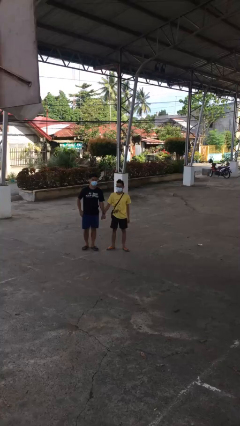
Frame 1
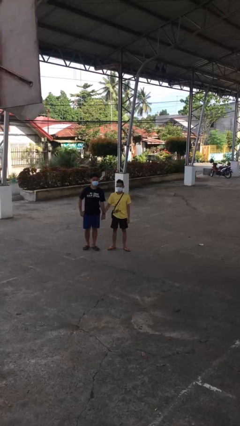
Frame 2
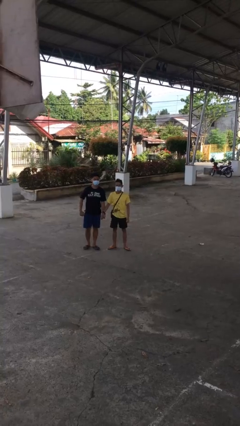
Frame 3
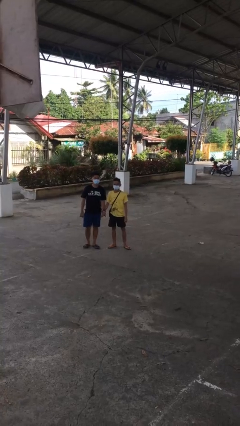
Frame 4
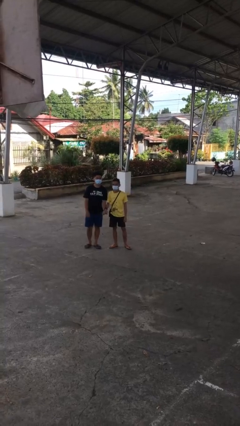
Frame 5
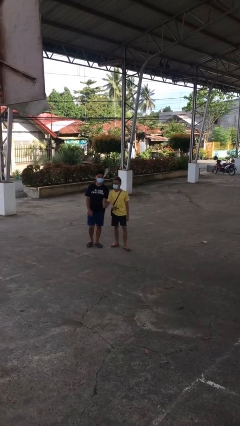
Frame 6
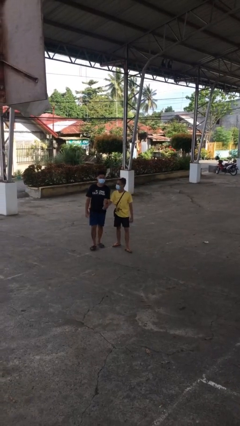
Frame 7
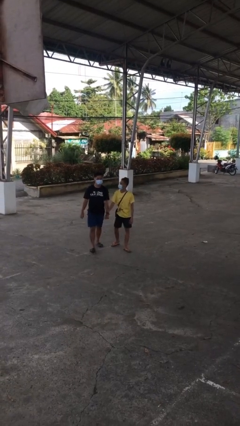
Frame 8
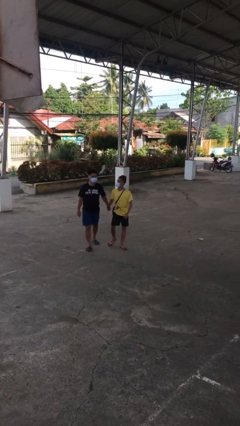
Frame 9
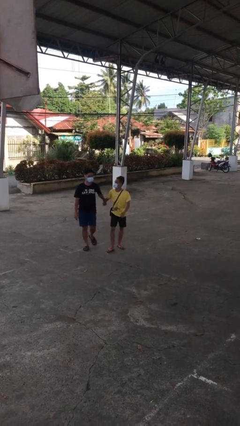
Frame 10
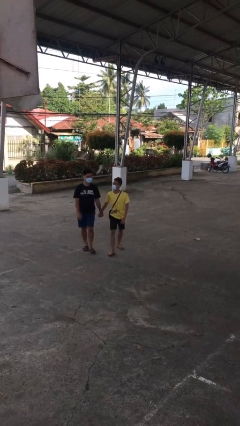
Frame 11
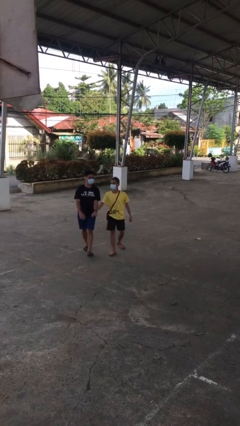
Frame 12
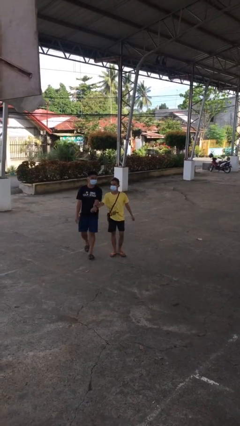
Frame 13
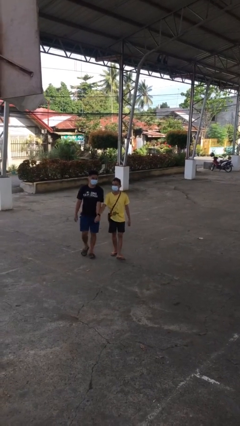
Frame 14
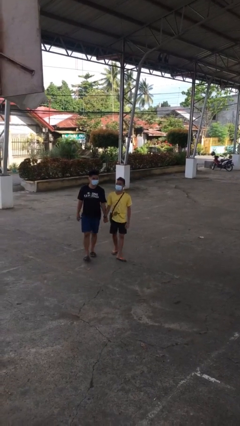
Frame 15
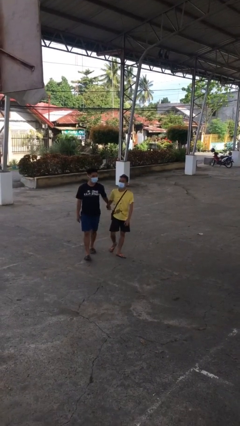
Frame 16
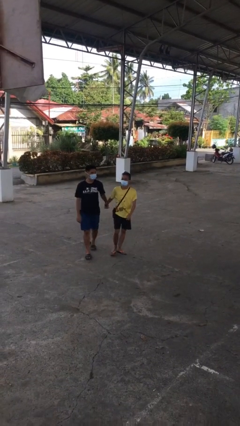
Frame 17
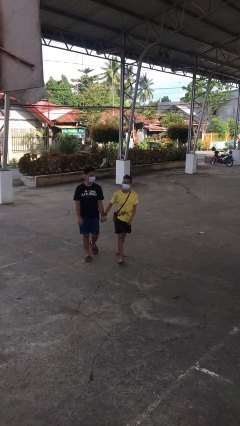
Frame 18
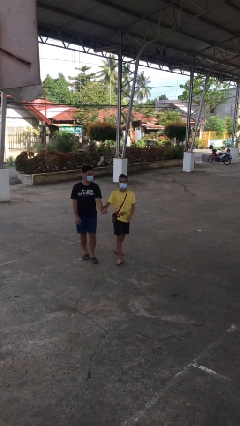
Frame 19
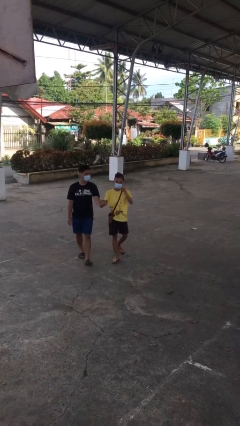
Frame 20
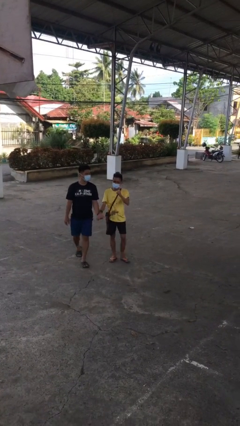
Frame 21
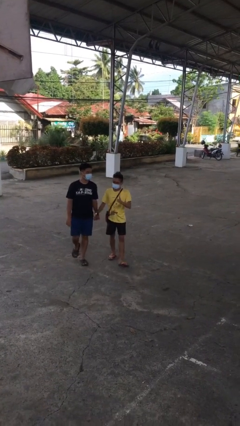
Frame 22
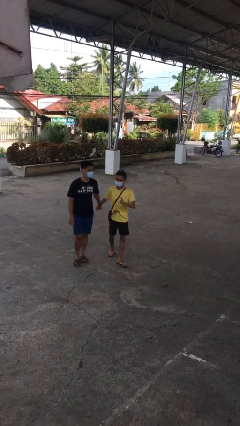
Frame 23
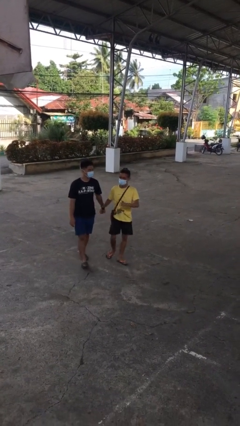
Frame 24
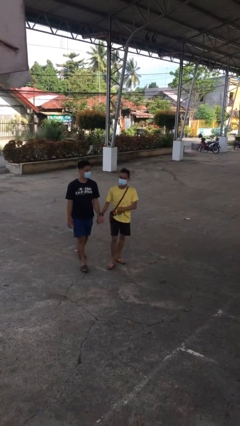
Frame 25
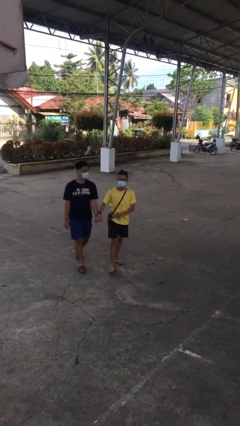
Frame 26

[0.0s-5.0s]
person holds hand

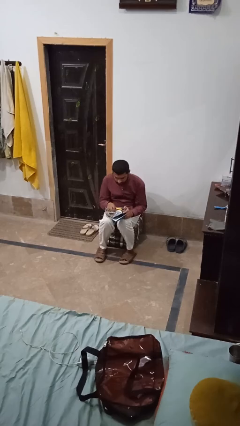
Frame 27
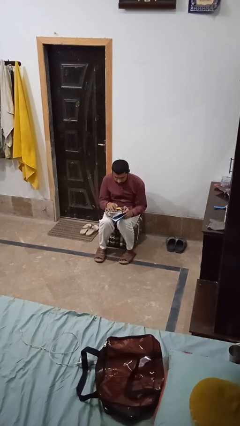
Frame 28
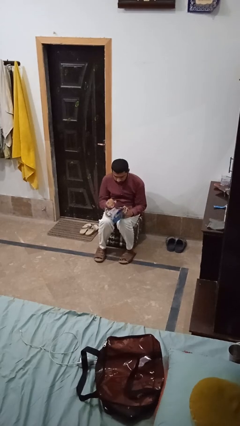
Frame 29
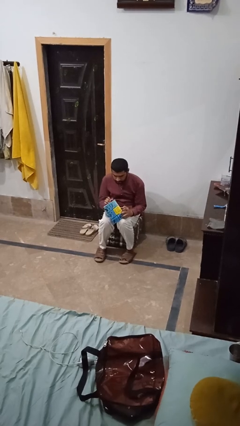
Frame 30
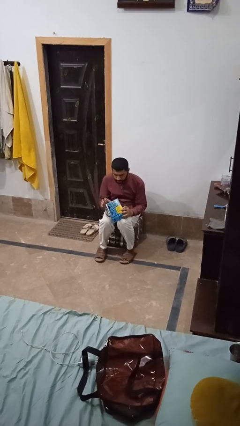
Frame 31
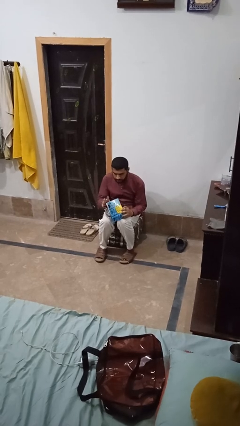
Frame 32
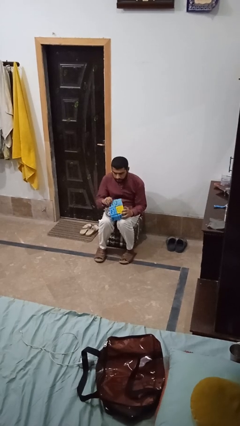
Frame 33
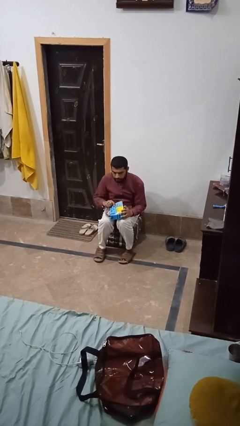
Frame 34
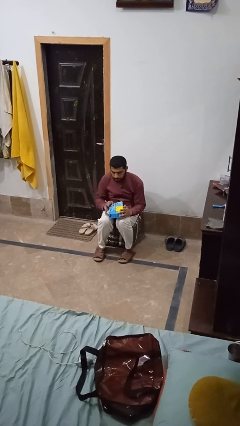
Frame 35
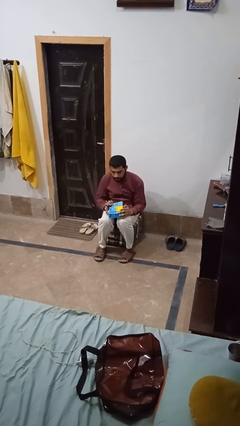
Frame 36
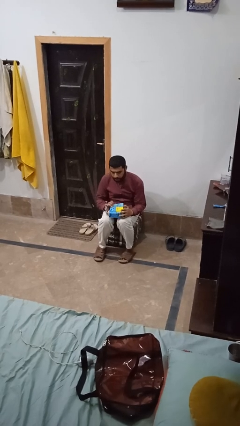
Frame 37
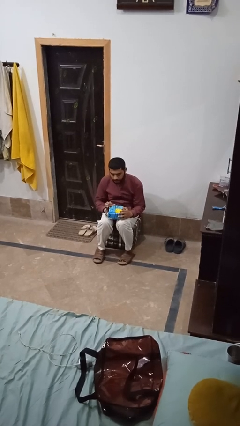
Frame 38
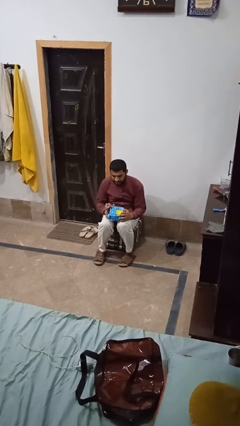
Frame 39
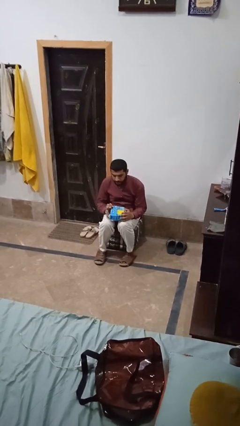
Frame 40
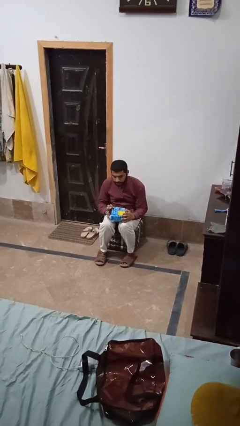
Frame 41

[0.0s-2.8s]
person closes jewelry box

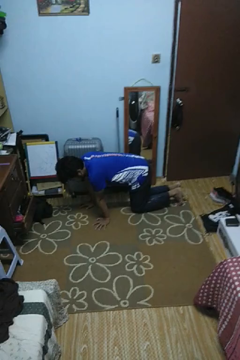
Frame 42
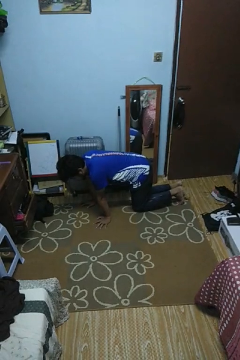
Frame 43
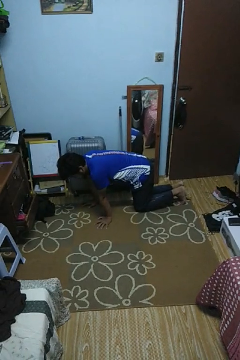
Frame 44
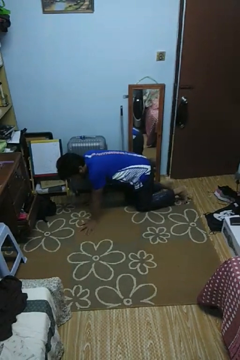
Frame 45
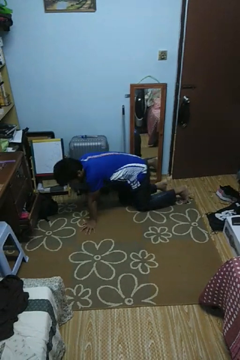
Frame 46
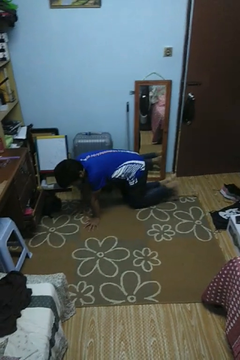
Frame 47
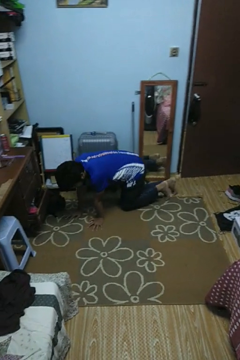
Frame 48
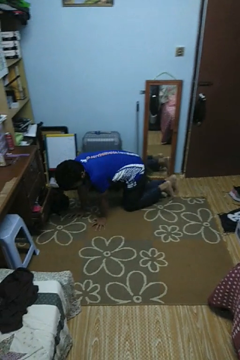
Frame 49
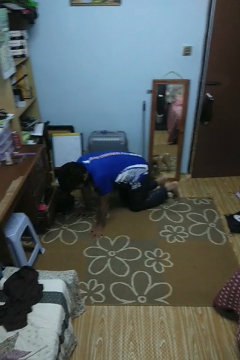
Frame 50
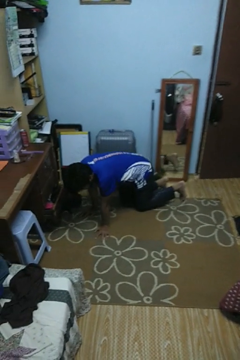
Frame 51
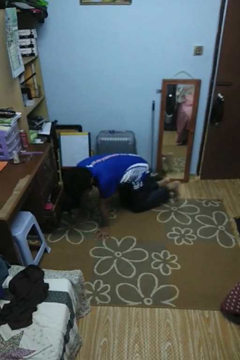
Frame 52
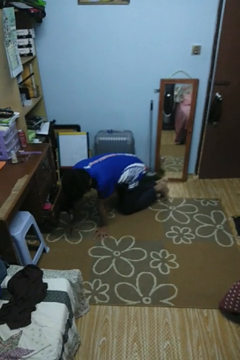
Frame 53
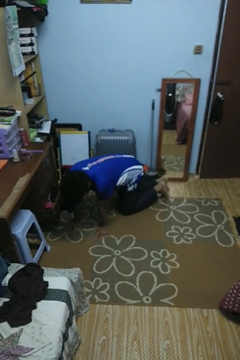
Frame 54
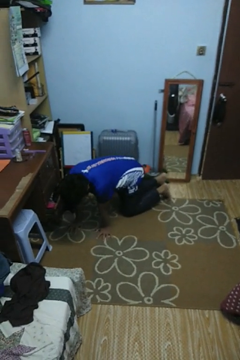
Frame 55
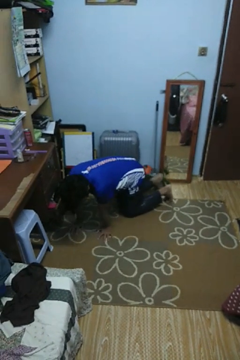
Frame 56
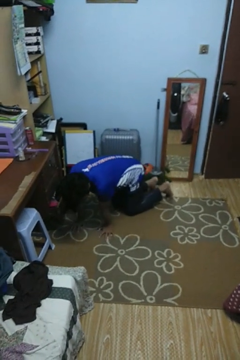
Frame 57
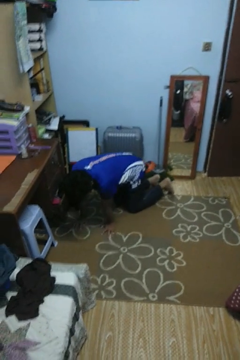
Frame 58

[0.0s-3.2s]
person crawls

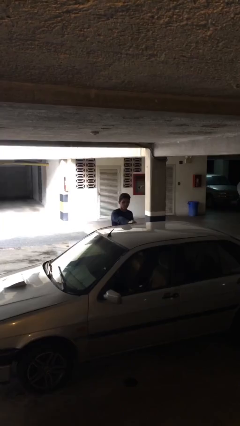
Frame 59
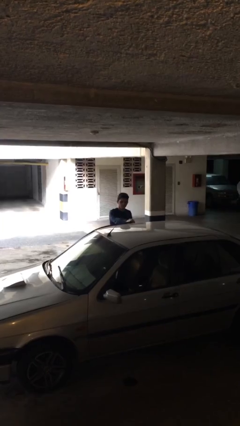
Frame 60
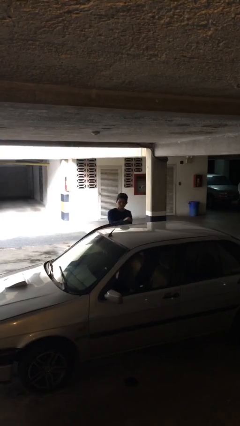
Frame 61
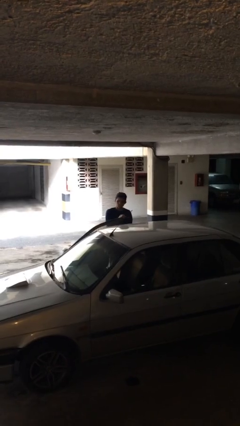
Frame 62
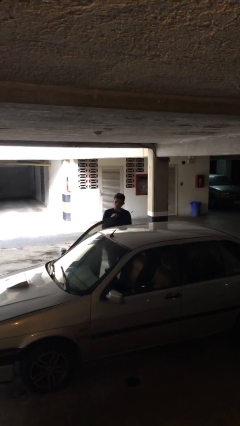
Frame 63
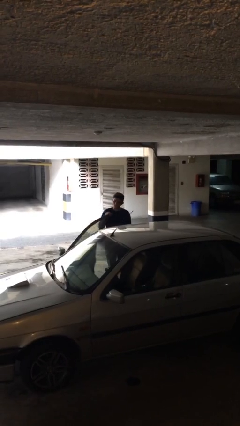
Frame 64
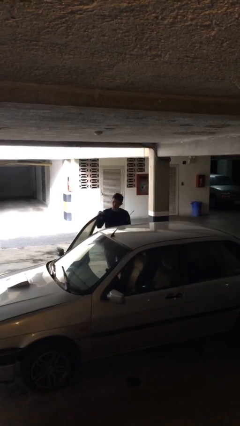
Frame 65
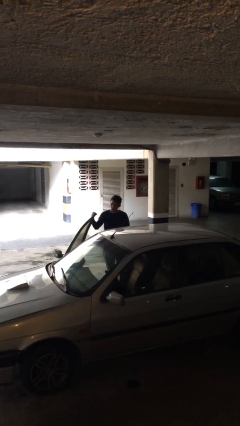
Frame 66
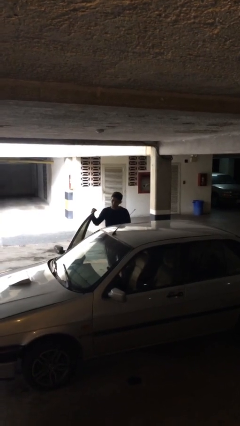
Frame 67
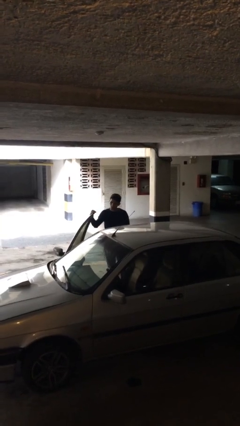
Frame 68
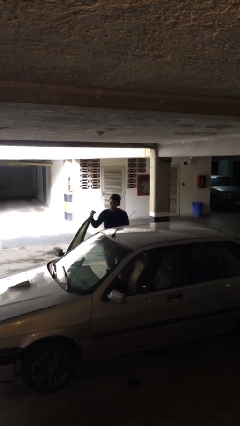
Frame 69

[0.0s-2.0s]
person opens car door

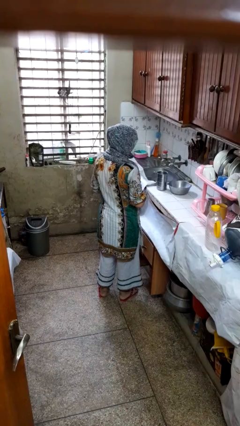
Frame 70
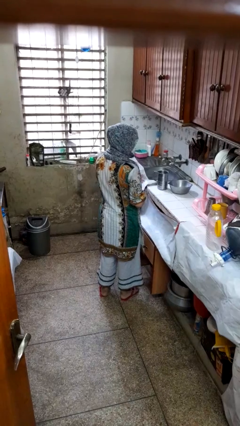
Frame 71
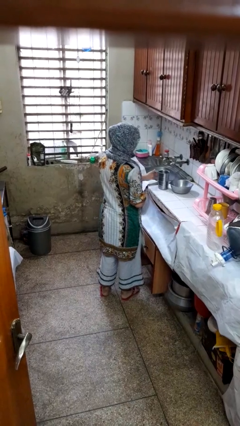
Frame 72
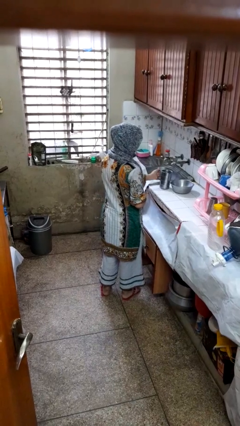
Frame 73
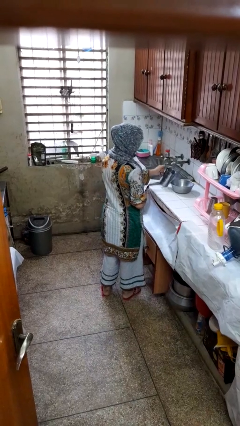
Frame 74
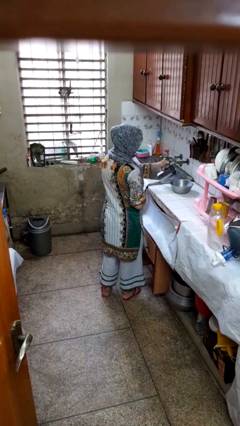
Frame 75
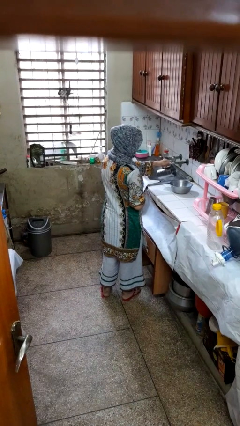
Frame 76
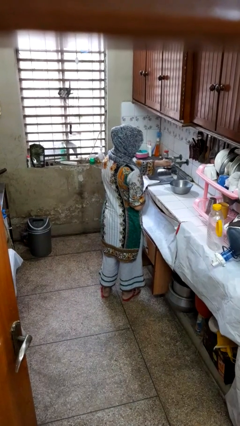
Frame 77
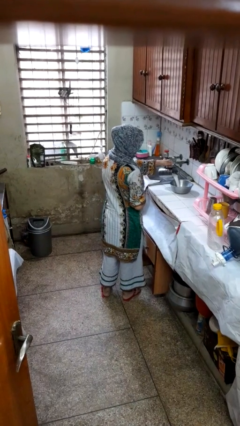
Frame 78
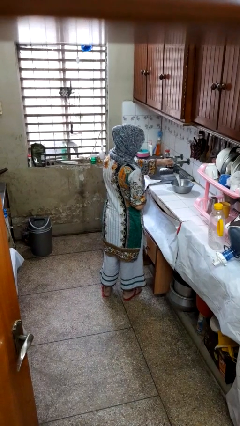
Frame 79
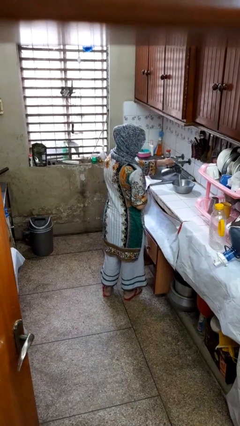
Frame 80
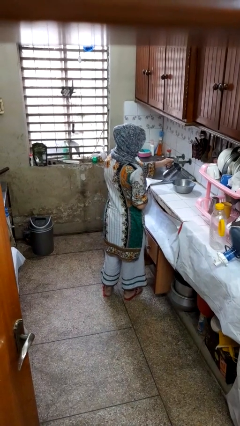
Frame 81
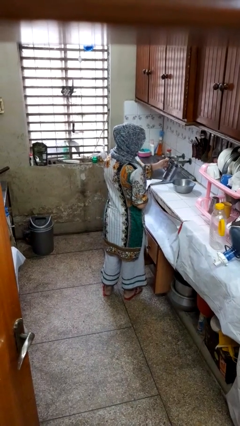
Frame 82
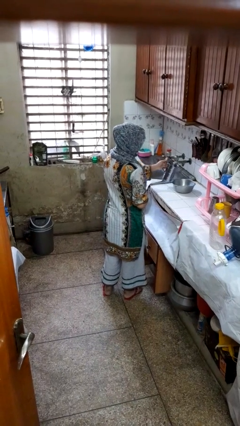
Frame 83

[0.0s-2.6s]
person pours into bowl

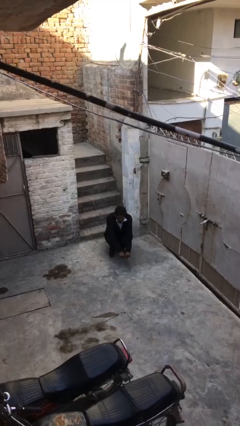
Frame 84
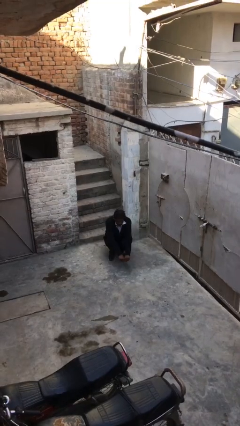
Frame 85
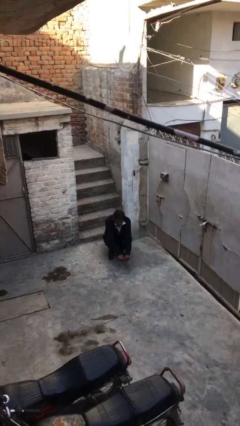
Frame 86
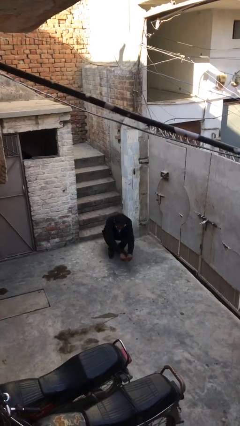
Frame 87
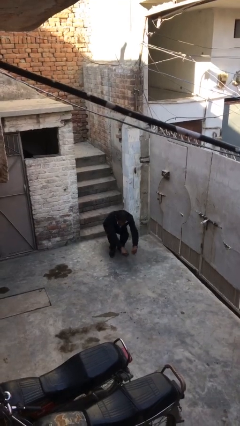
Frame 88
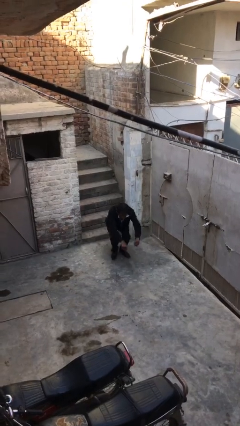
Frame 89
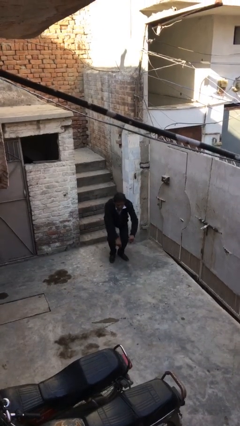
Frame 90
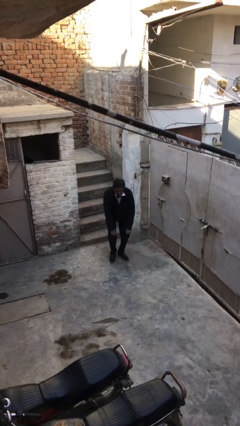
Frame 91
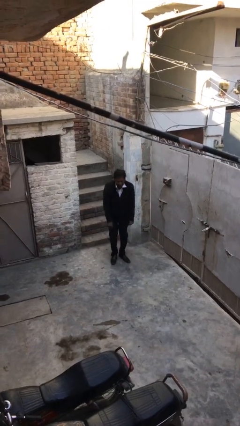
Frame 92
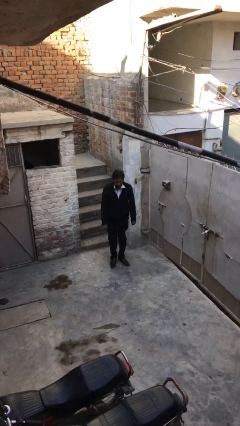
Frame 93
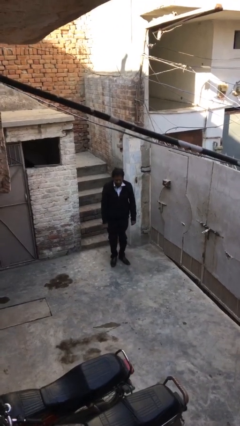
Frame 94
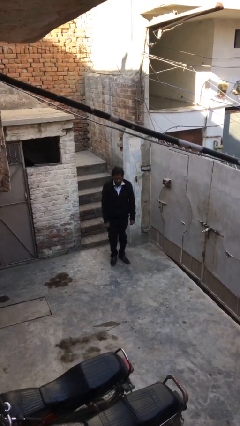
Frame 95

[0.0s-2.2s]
person stands up
